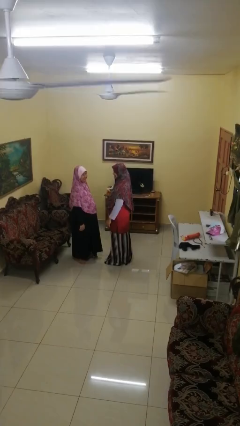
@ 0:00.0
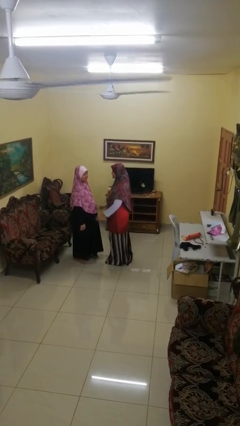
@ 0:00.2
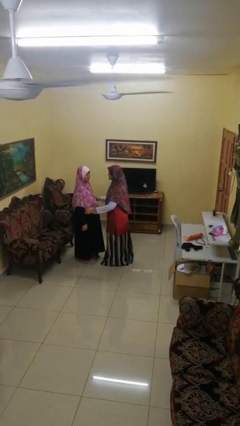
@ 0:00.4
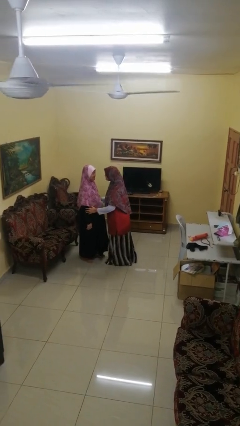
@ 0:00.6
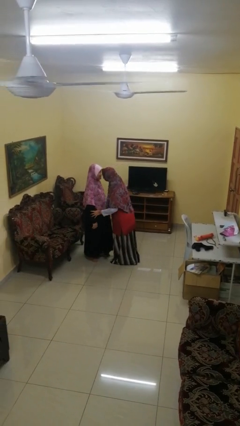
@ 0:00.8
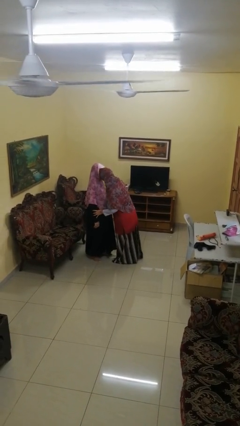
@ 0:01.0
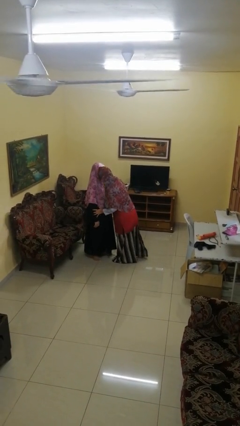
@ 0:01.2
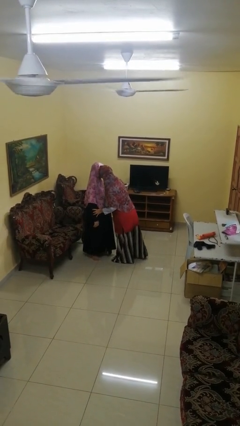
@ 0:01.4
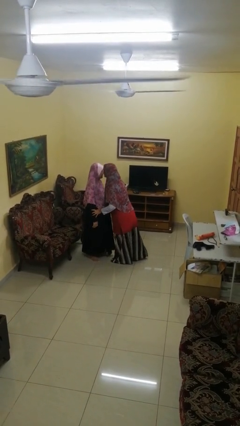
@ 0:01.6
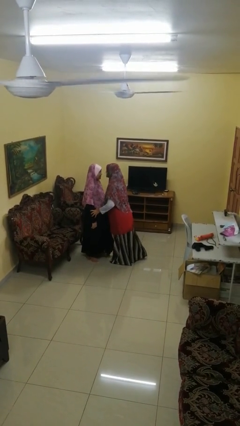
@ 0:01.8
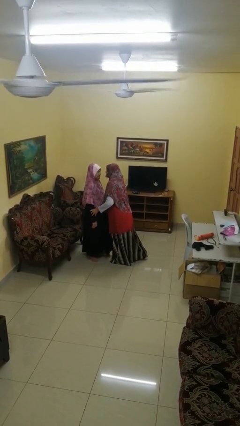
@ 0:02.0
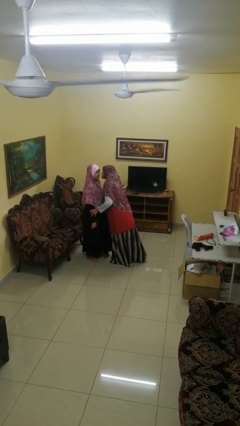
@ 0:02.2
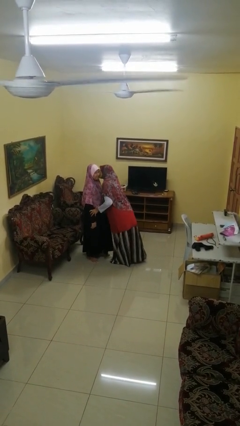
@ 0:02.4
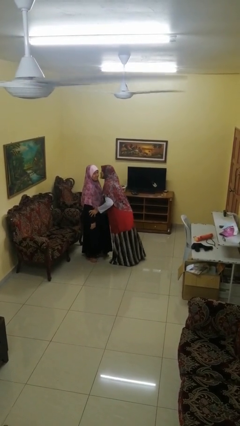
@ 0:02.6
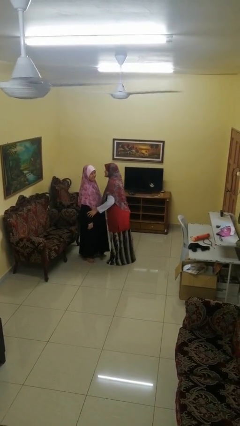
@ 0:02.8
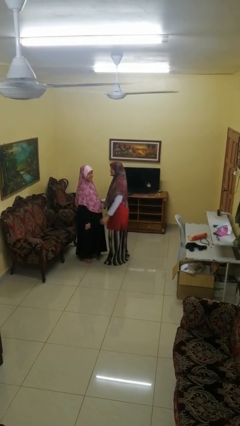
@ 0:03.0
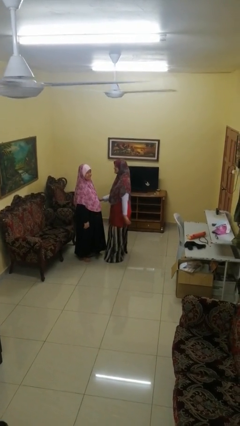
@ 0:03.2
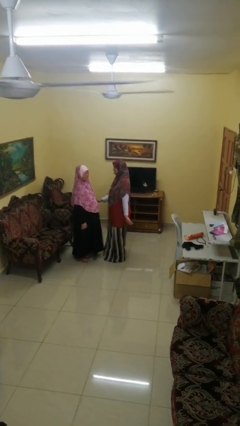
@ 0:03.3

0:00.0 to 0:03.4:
person kisses cheek of person

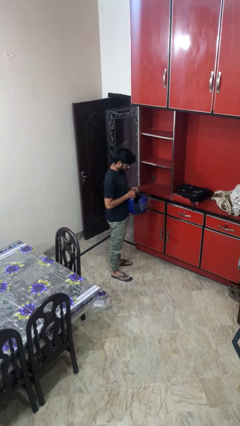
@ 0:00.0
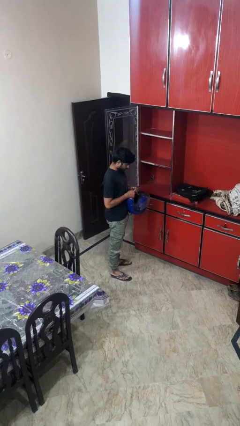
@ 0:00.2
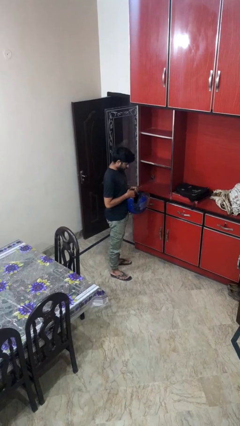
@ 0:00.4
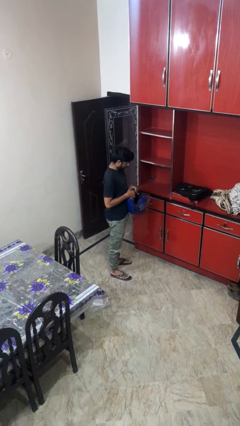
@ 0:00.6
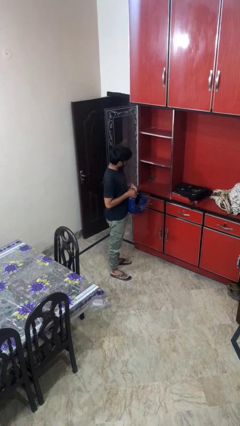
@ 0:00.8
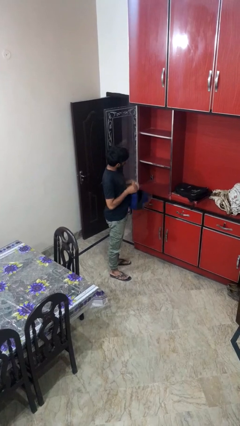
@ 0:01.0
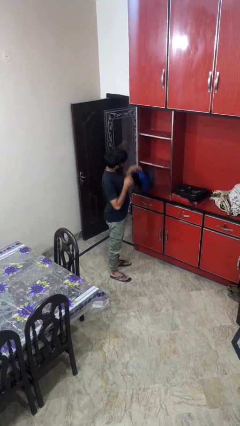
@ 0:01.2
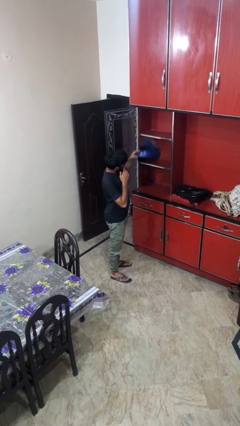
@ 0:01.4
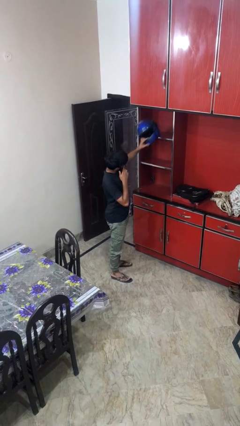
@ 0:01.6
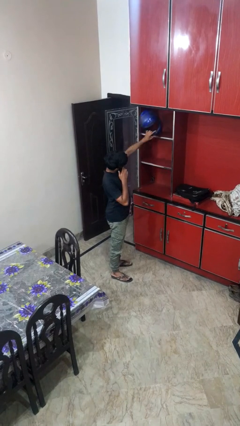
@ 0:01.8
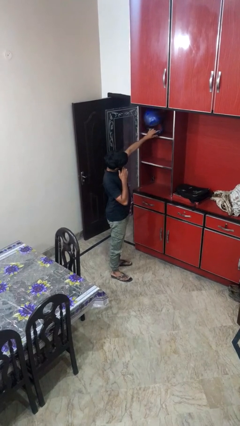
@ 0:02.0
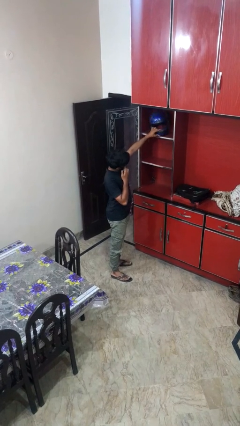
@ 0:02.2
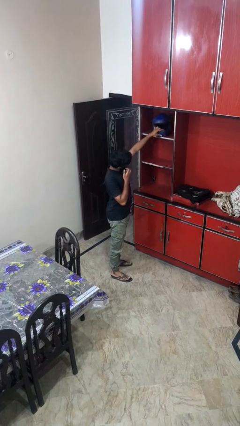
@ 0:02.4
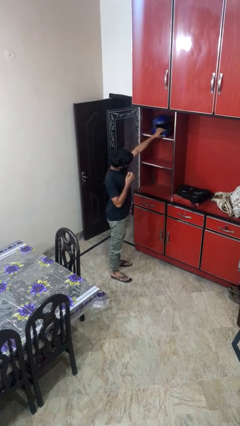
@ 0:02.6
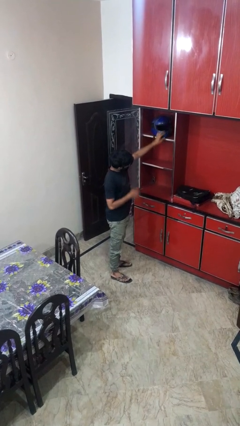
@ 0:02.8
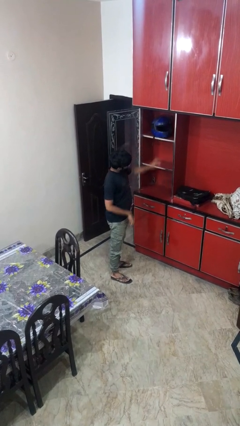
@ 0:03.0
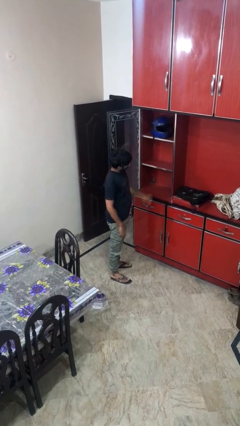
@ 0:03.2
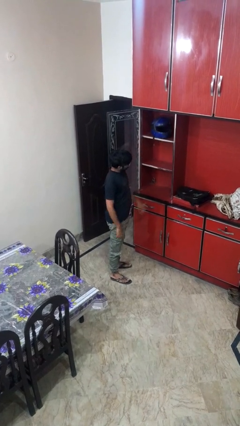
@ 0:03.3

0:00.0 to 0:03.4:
person puts down object on shelf

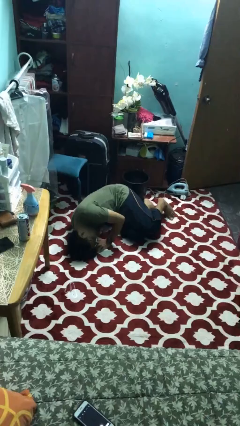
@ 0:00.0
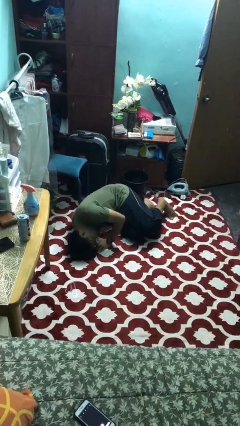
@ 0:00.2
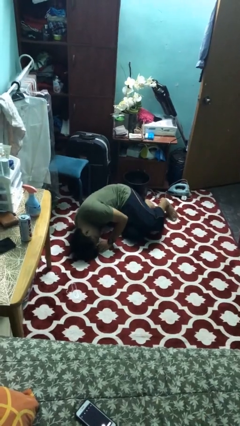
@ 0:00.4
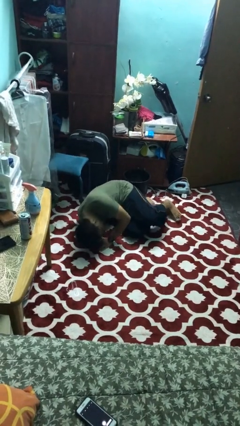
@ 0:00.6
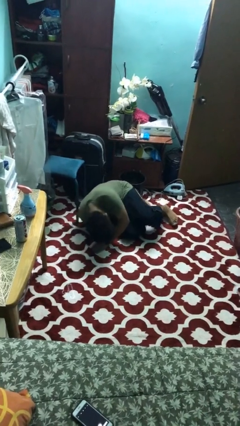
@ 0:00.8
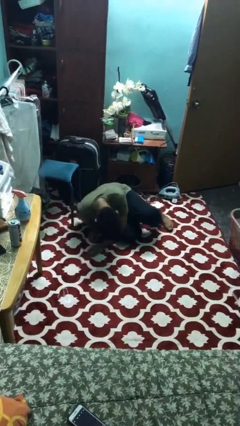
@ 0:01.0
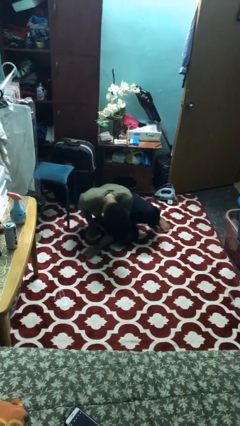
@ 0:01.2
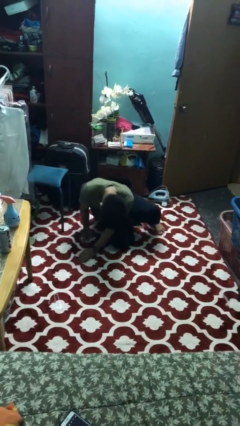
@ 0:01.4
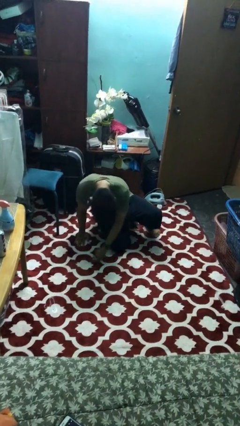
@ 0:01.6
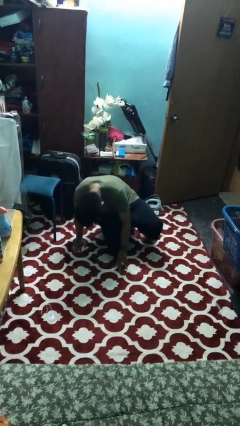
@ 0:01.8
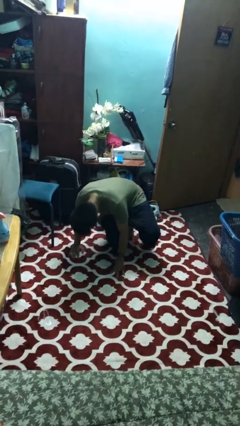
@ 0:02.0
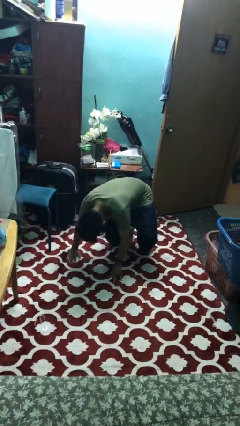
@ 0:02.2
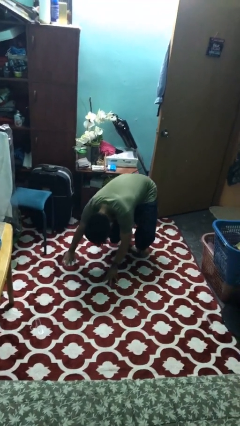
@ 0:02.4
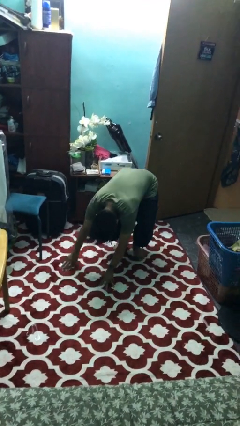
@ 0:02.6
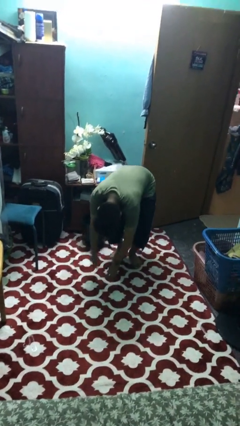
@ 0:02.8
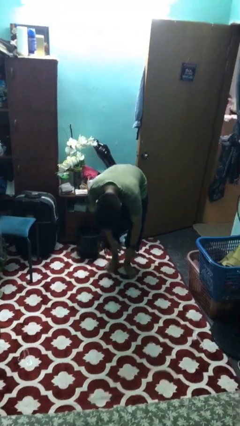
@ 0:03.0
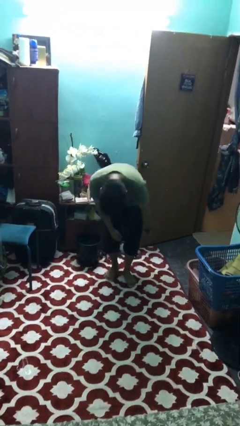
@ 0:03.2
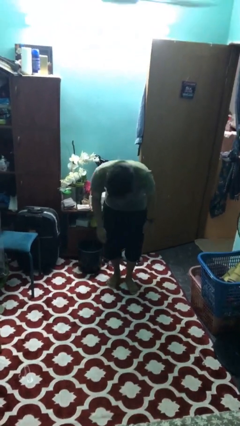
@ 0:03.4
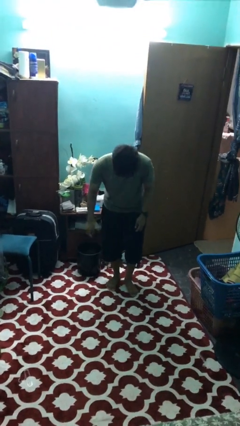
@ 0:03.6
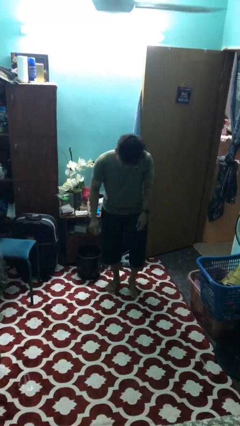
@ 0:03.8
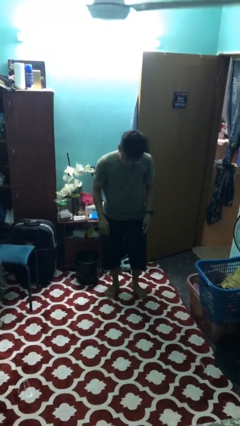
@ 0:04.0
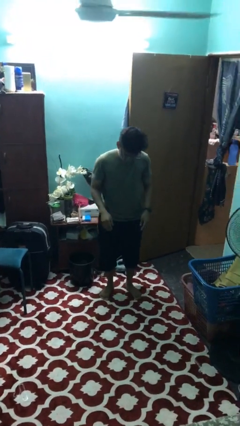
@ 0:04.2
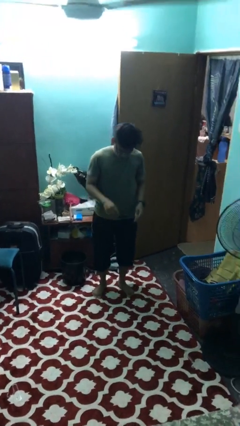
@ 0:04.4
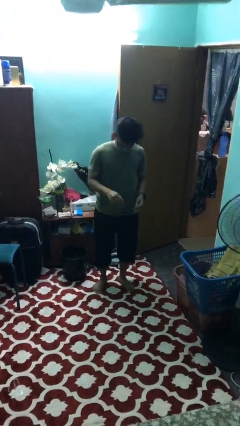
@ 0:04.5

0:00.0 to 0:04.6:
person stands up from floor

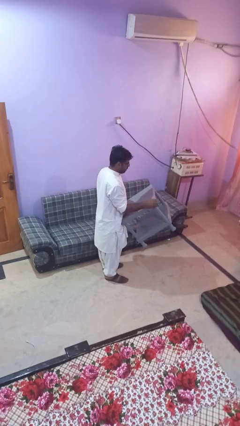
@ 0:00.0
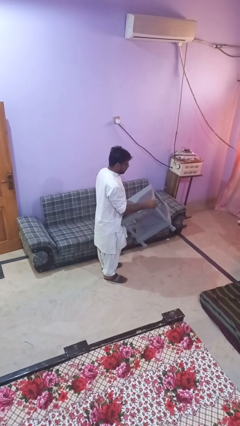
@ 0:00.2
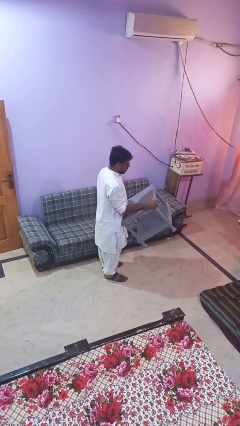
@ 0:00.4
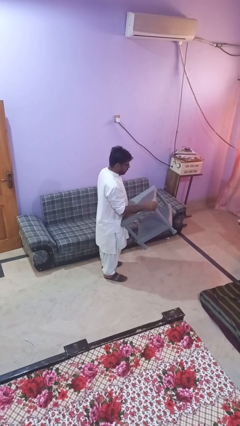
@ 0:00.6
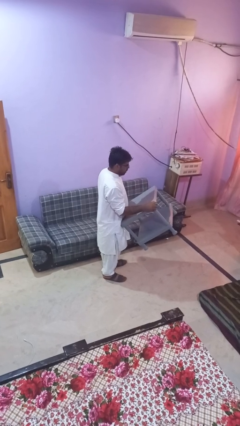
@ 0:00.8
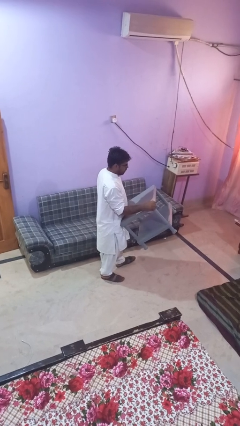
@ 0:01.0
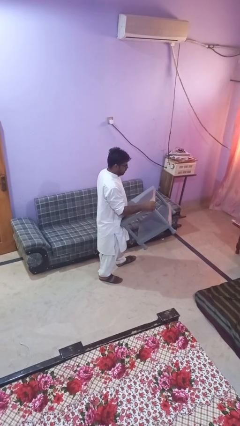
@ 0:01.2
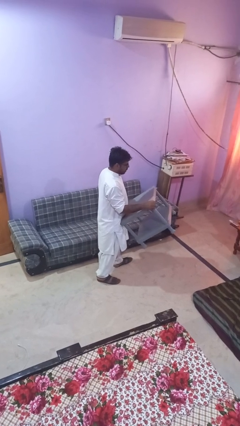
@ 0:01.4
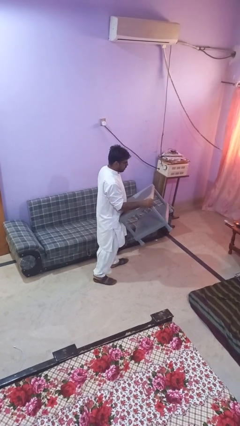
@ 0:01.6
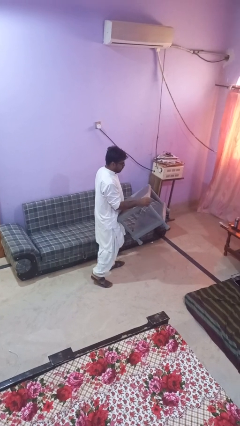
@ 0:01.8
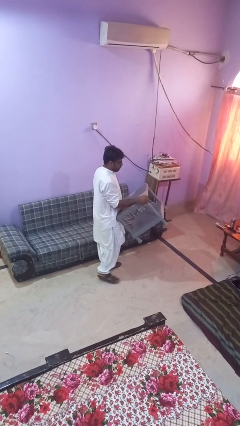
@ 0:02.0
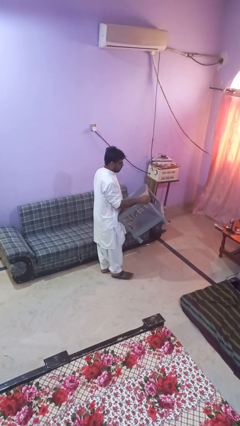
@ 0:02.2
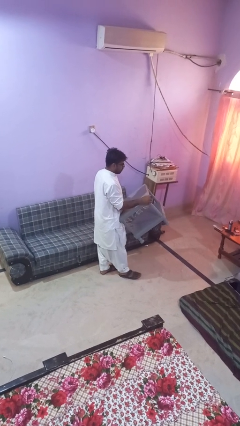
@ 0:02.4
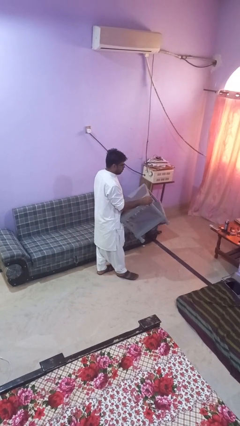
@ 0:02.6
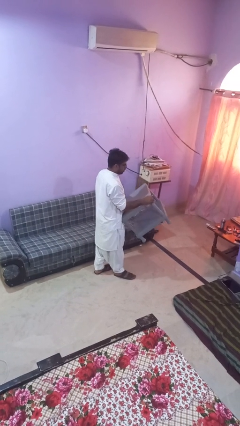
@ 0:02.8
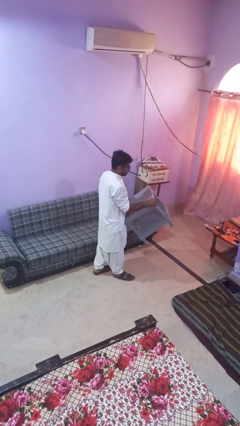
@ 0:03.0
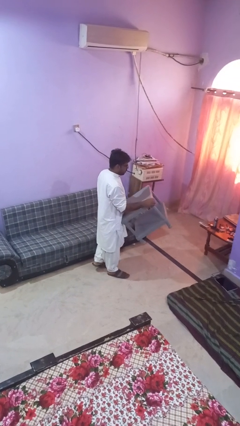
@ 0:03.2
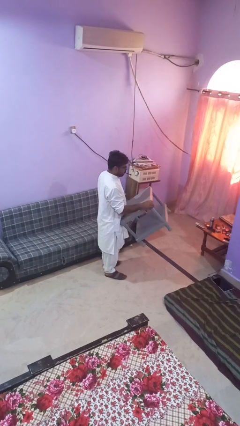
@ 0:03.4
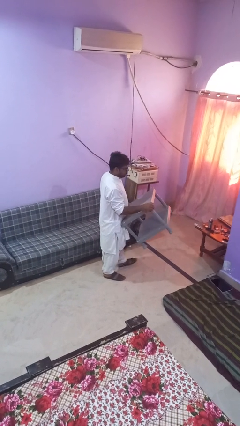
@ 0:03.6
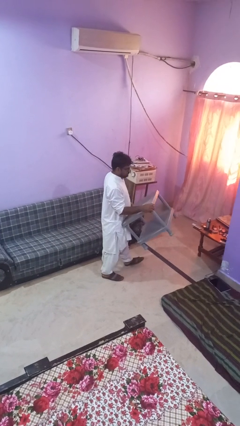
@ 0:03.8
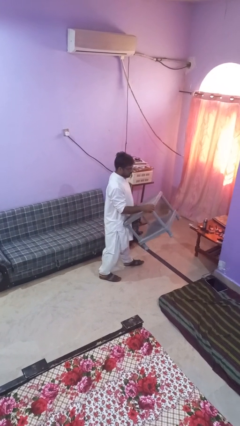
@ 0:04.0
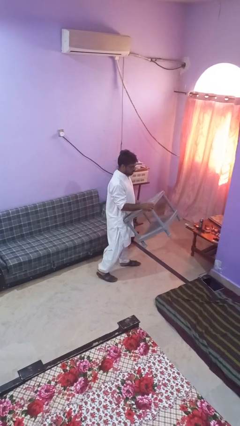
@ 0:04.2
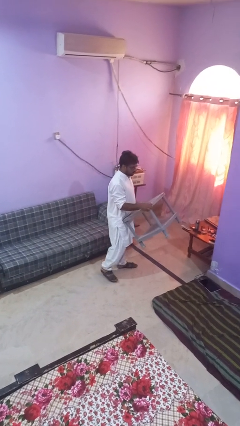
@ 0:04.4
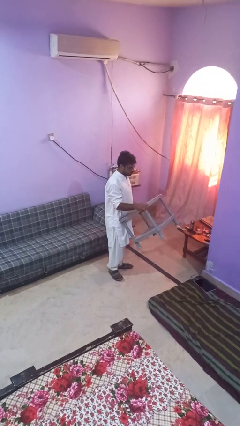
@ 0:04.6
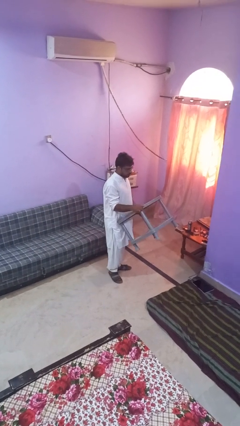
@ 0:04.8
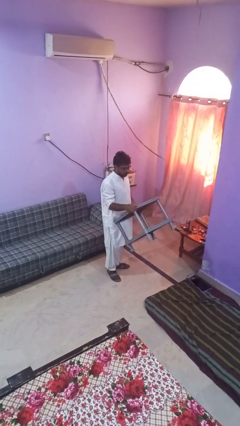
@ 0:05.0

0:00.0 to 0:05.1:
person carries furniture

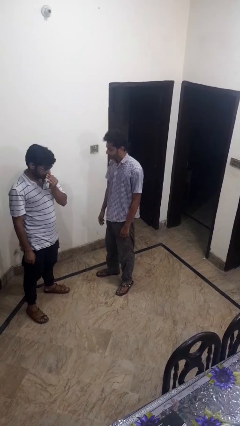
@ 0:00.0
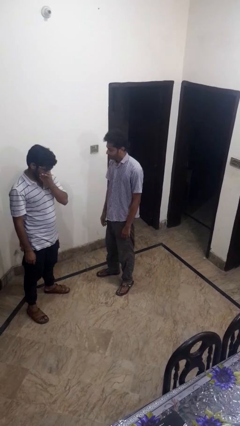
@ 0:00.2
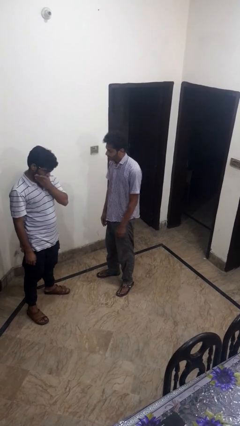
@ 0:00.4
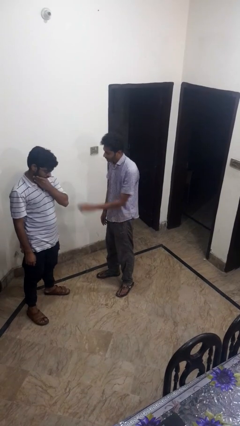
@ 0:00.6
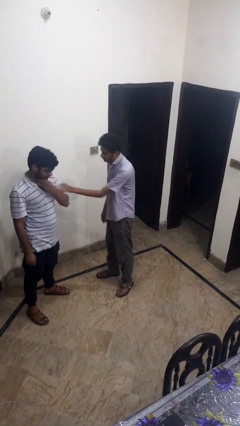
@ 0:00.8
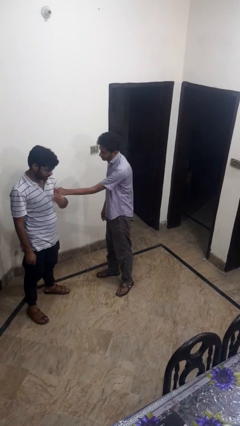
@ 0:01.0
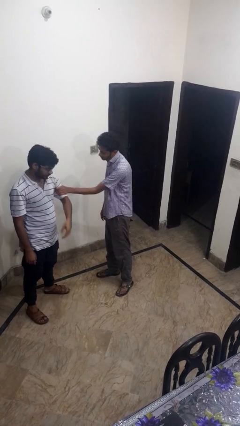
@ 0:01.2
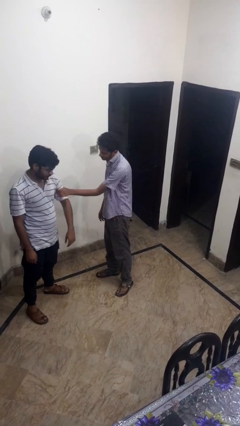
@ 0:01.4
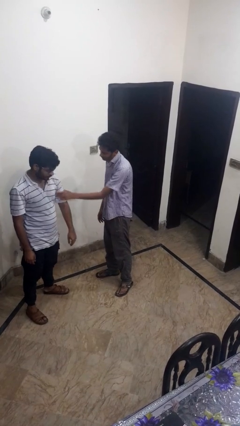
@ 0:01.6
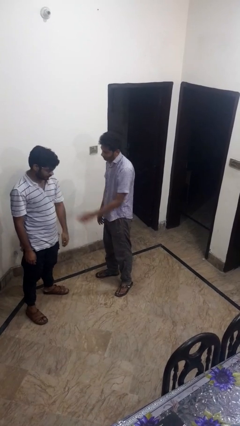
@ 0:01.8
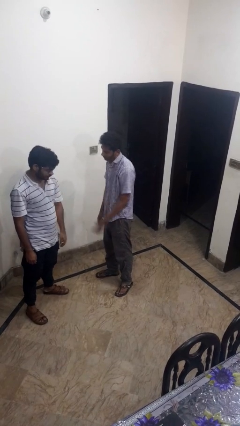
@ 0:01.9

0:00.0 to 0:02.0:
person grabs person by bicep
